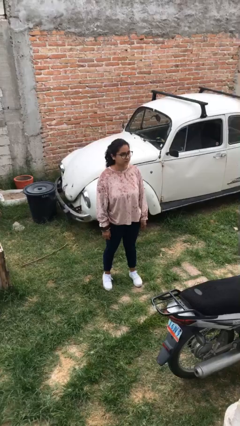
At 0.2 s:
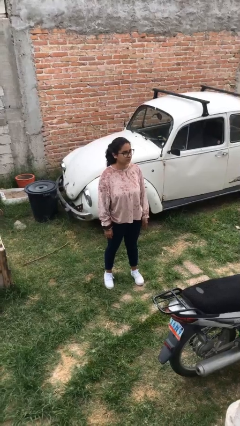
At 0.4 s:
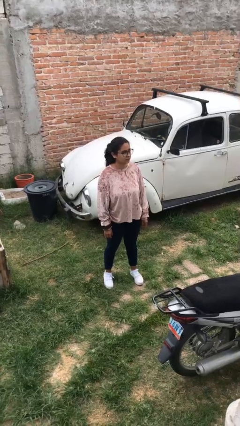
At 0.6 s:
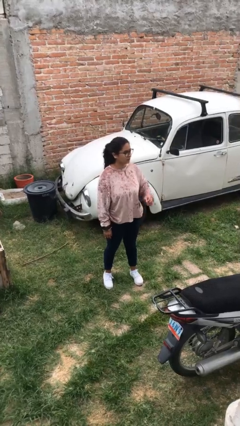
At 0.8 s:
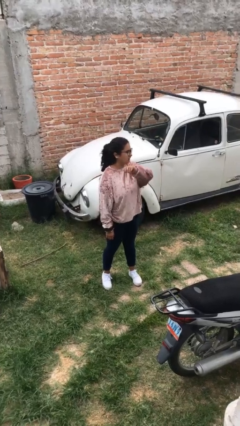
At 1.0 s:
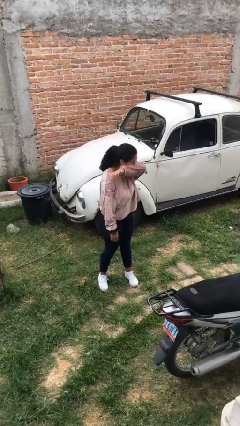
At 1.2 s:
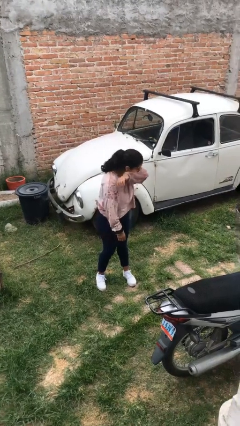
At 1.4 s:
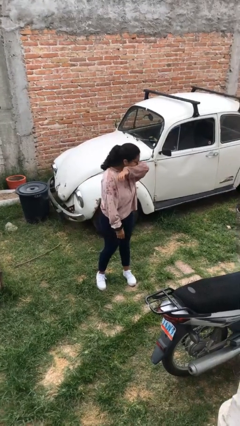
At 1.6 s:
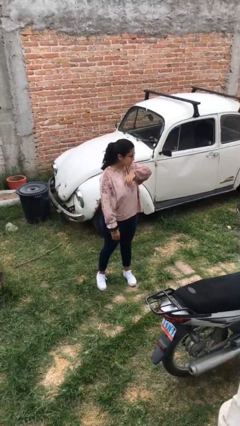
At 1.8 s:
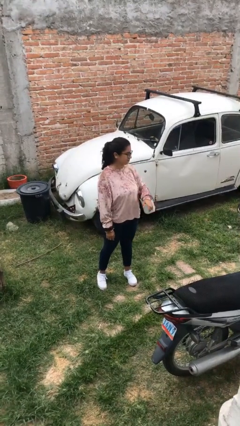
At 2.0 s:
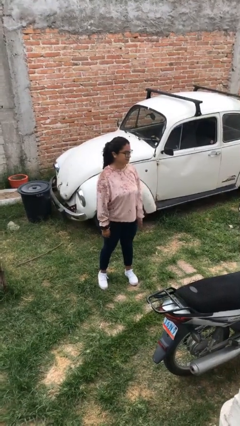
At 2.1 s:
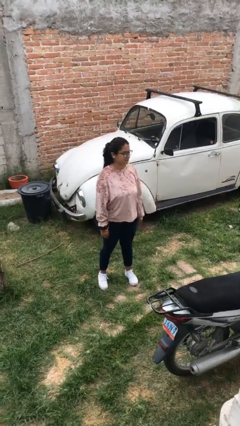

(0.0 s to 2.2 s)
person sneezes into arm

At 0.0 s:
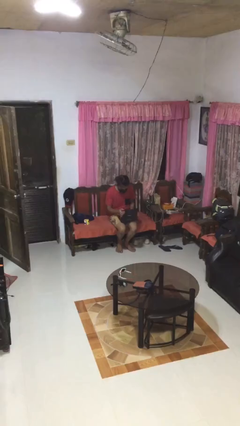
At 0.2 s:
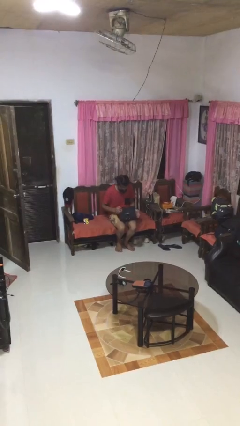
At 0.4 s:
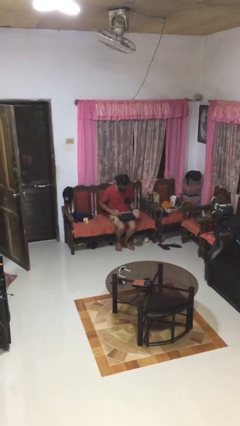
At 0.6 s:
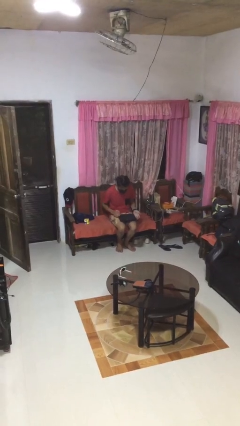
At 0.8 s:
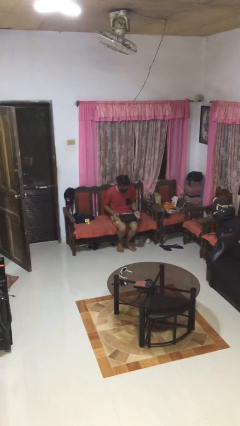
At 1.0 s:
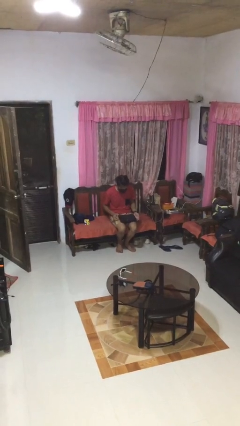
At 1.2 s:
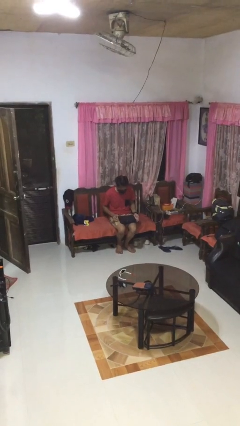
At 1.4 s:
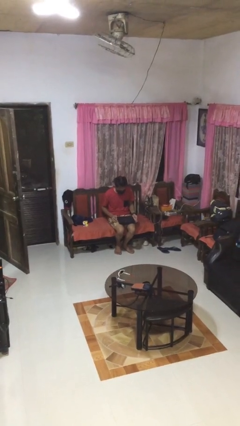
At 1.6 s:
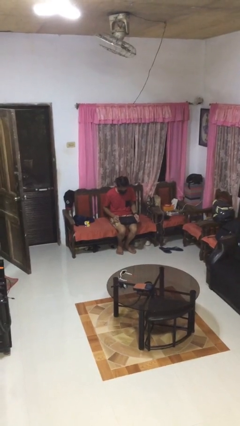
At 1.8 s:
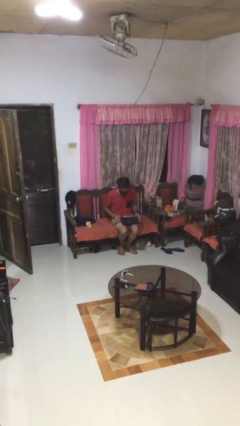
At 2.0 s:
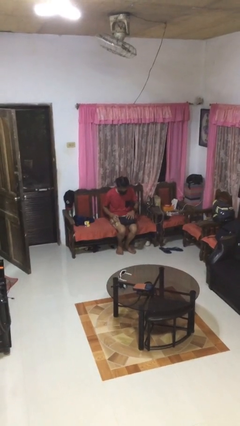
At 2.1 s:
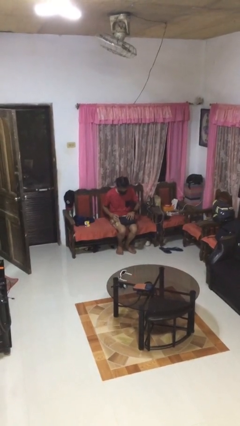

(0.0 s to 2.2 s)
person closes laptop

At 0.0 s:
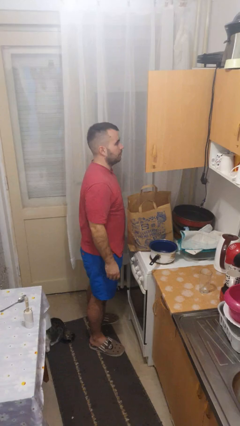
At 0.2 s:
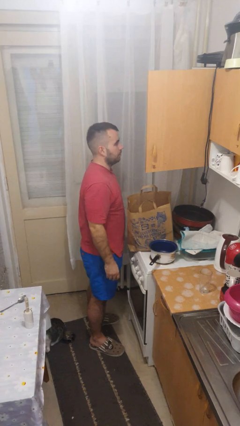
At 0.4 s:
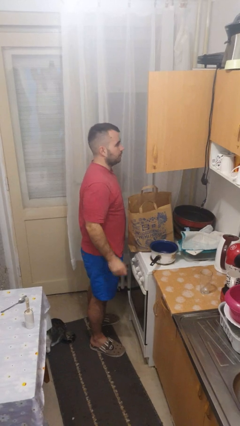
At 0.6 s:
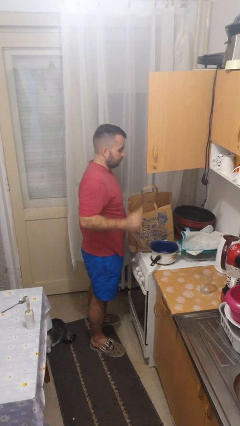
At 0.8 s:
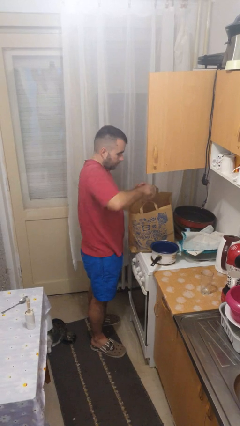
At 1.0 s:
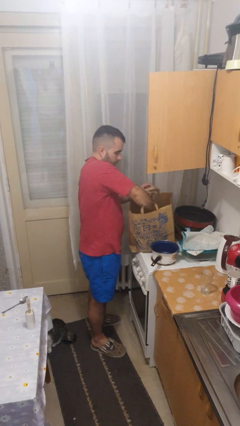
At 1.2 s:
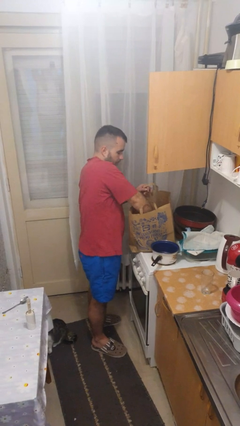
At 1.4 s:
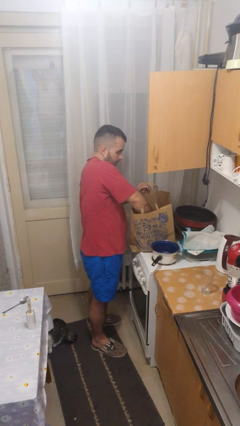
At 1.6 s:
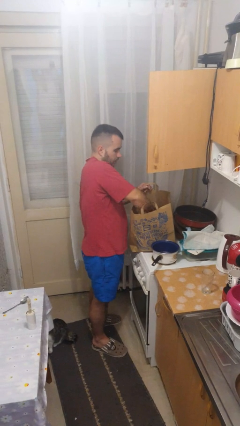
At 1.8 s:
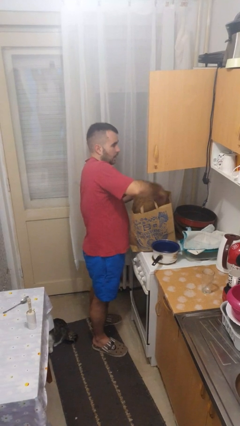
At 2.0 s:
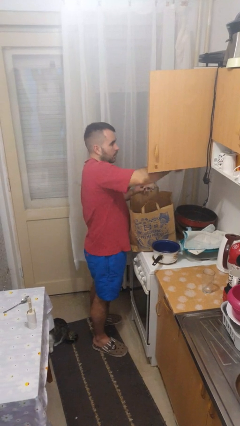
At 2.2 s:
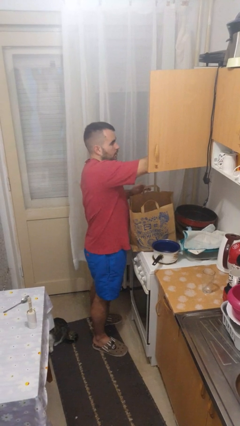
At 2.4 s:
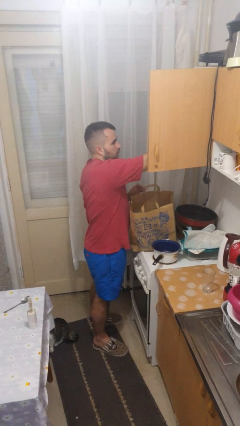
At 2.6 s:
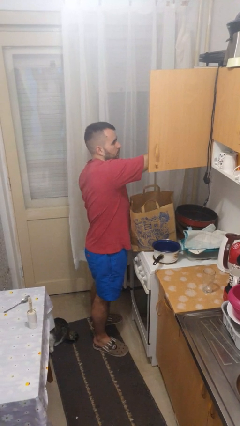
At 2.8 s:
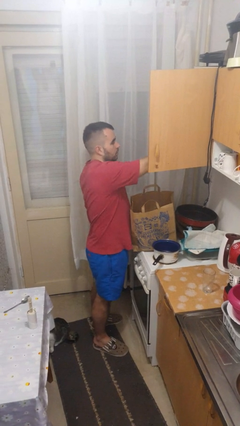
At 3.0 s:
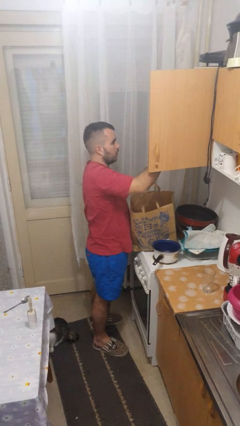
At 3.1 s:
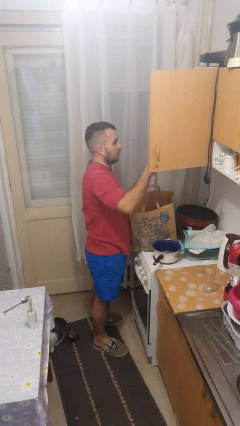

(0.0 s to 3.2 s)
person loads groceries into cabinet

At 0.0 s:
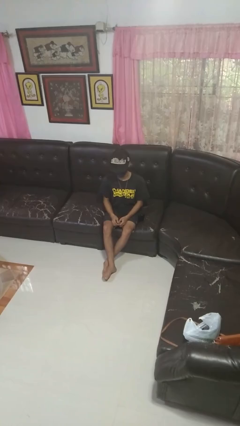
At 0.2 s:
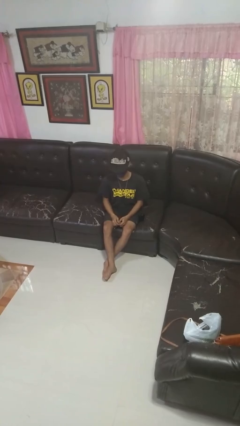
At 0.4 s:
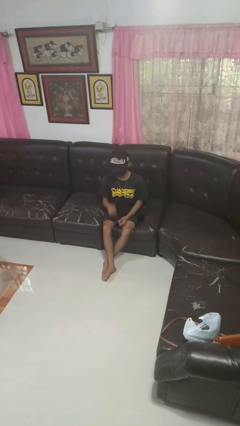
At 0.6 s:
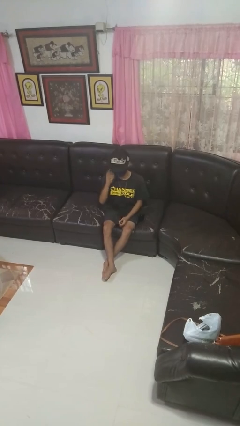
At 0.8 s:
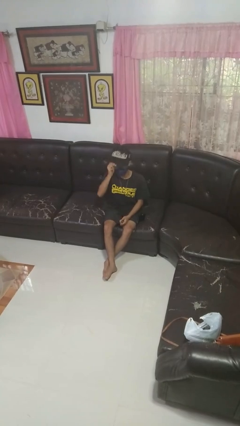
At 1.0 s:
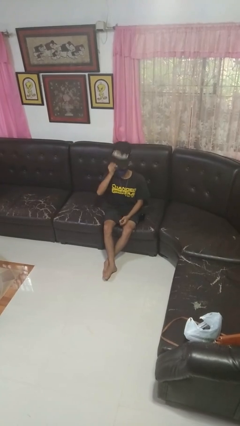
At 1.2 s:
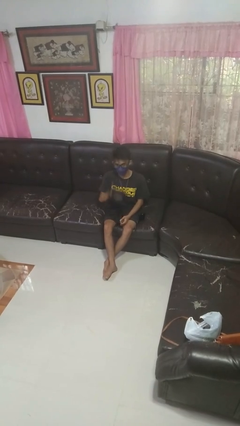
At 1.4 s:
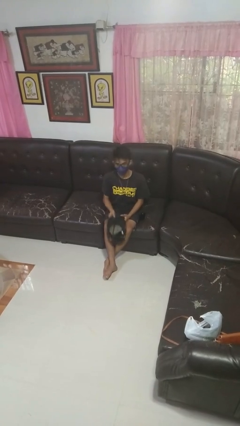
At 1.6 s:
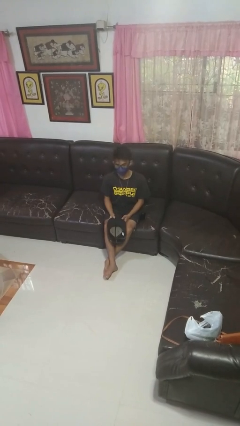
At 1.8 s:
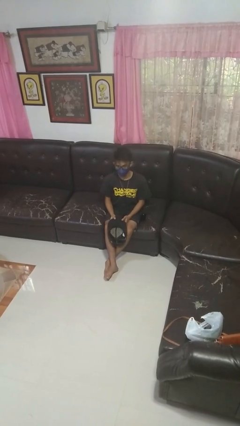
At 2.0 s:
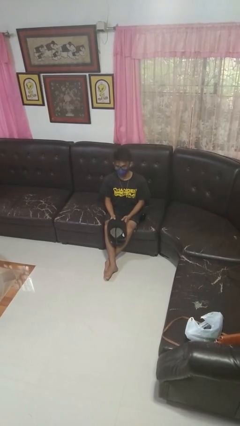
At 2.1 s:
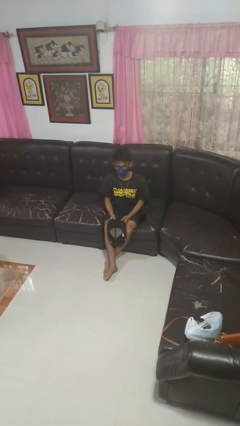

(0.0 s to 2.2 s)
person takes off hat

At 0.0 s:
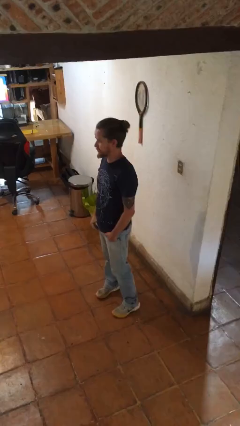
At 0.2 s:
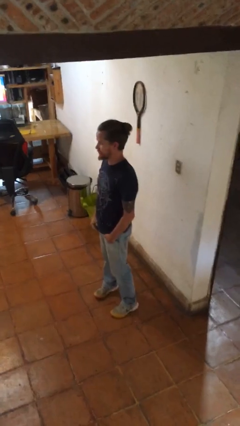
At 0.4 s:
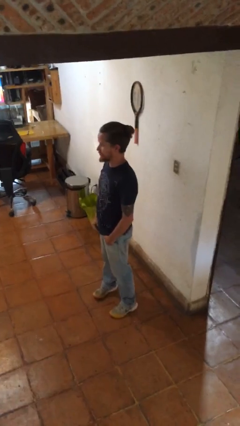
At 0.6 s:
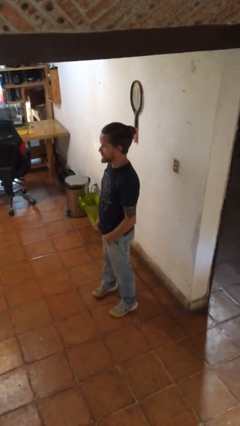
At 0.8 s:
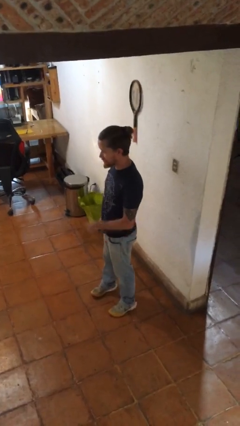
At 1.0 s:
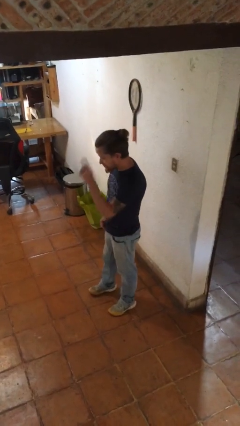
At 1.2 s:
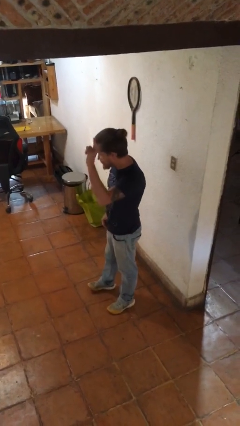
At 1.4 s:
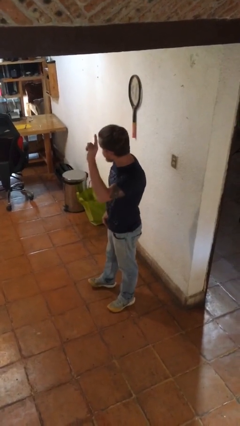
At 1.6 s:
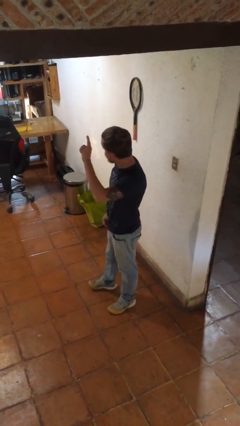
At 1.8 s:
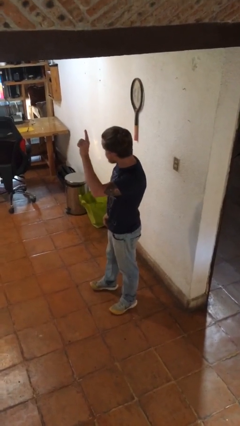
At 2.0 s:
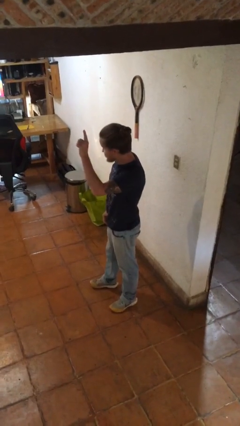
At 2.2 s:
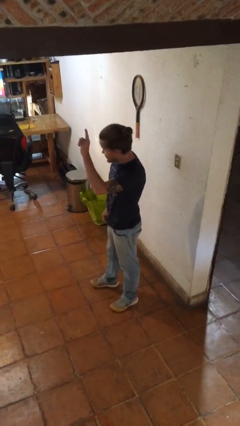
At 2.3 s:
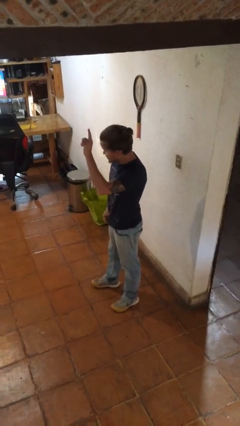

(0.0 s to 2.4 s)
person gestures raise hand

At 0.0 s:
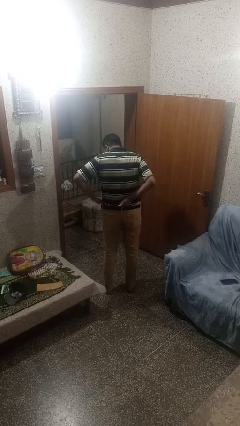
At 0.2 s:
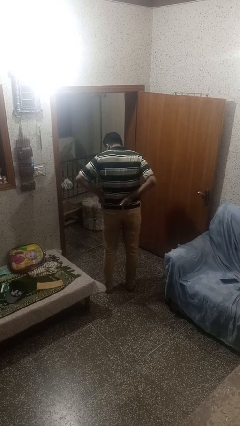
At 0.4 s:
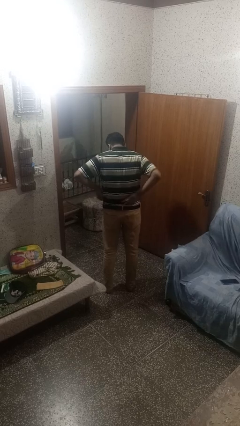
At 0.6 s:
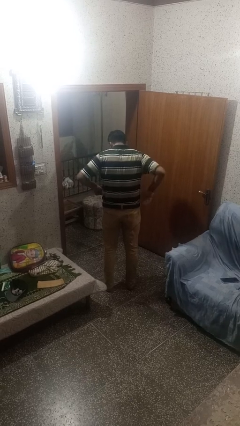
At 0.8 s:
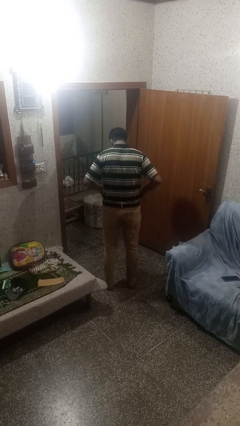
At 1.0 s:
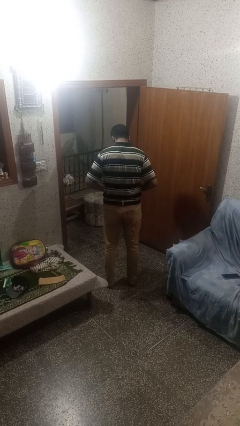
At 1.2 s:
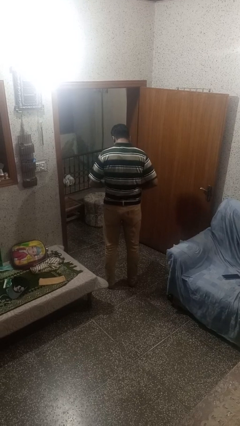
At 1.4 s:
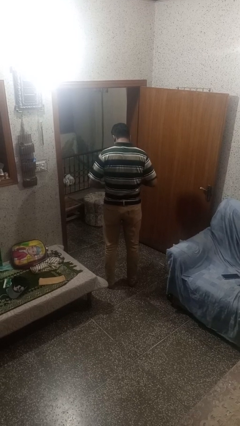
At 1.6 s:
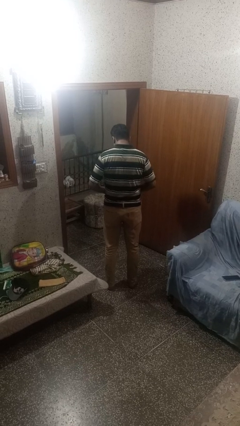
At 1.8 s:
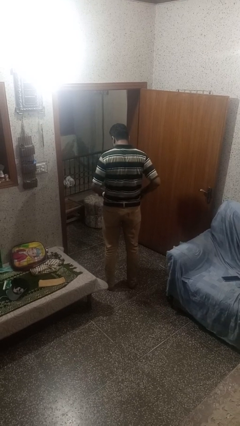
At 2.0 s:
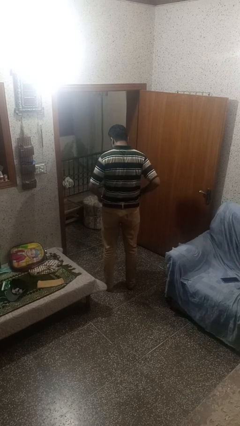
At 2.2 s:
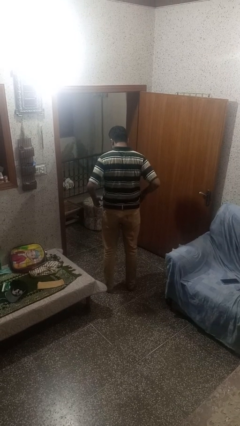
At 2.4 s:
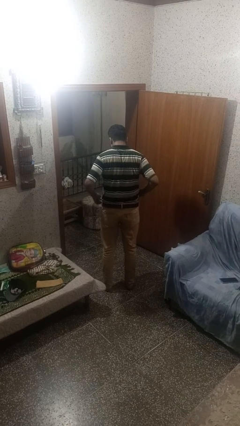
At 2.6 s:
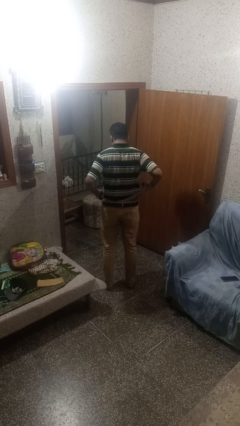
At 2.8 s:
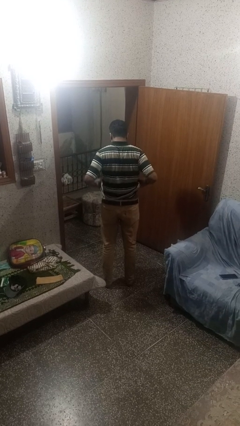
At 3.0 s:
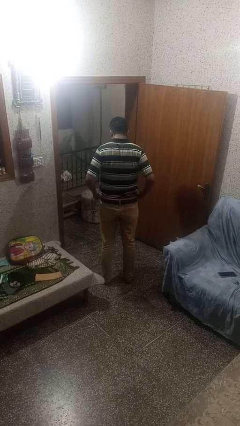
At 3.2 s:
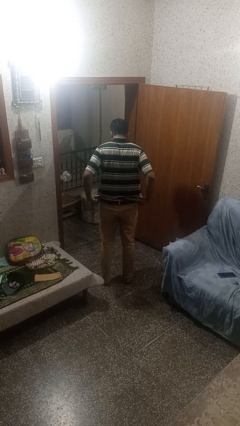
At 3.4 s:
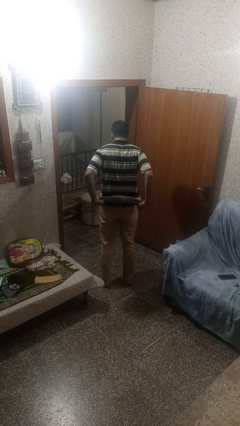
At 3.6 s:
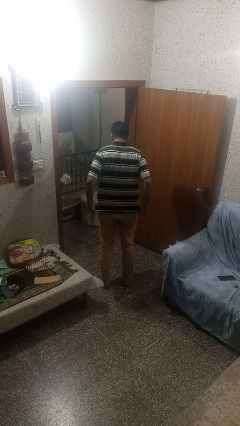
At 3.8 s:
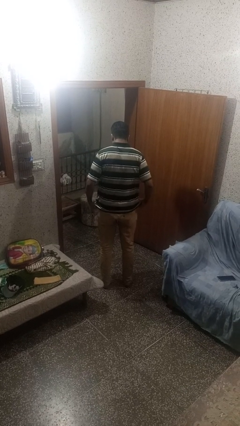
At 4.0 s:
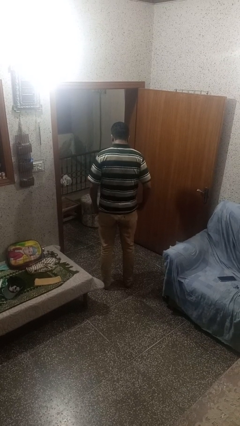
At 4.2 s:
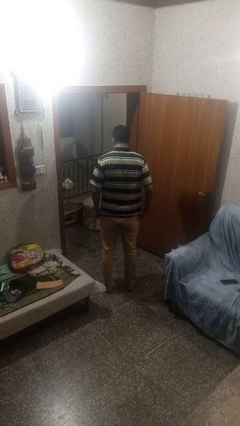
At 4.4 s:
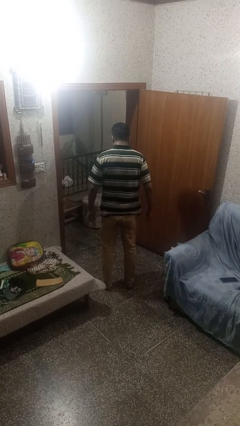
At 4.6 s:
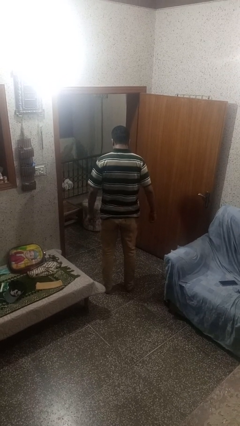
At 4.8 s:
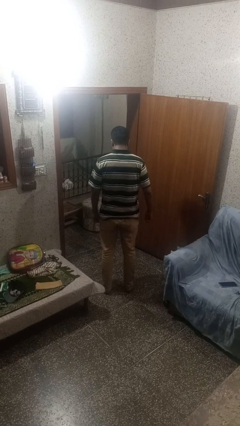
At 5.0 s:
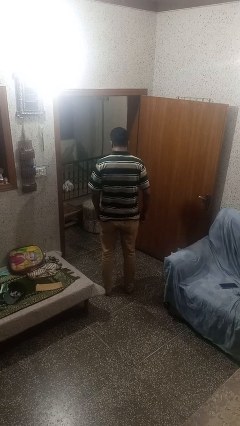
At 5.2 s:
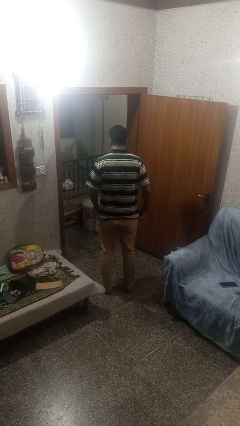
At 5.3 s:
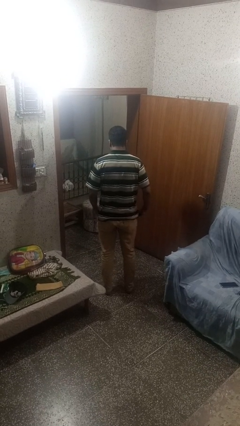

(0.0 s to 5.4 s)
person untucks shirt
